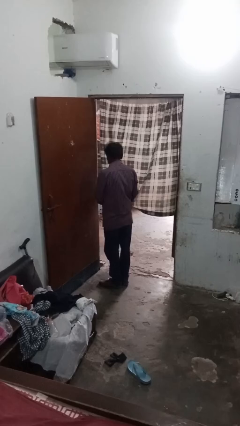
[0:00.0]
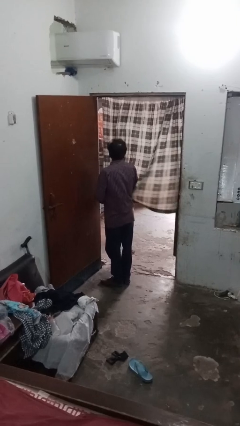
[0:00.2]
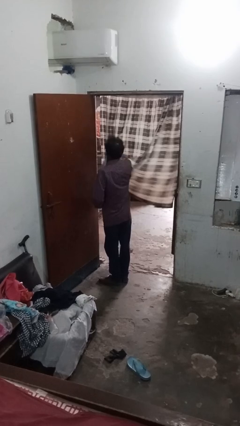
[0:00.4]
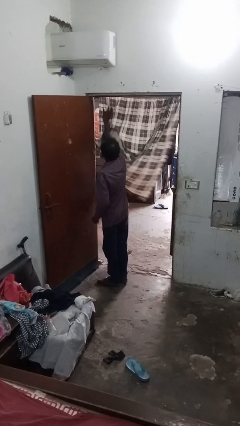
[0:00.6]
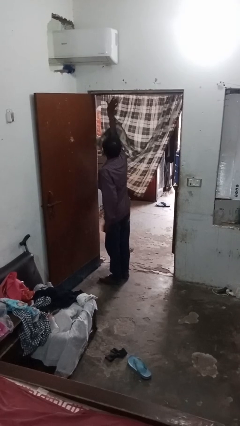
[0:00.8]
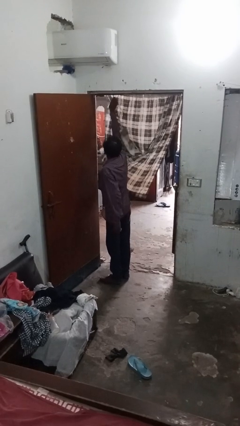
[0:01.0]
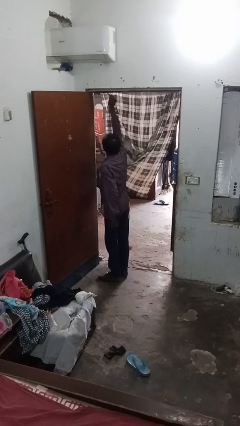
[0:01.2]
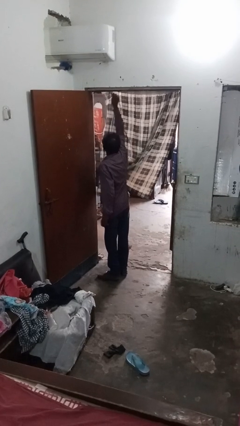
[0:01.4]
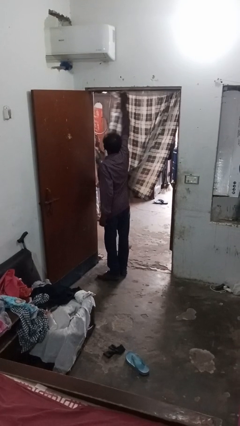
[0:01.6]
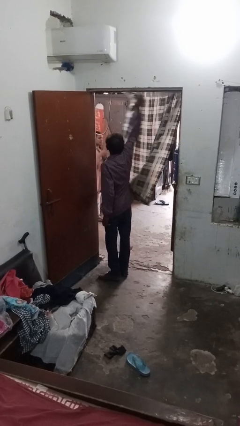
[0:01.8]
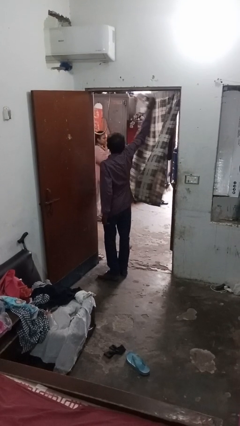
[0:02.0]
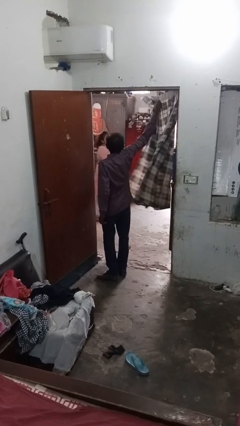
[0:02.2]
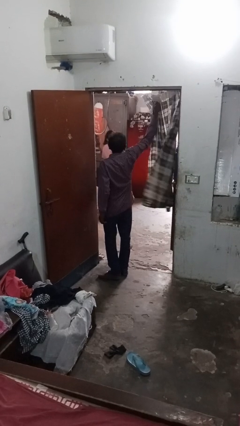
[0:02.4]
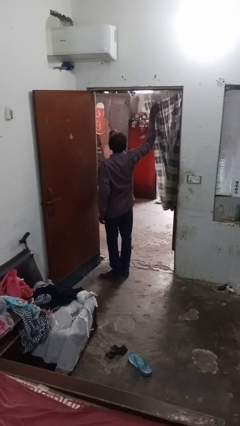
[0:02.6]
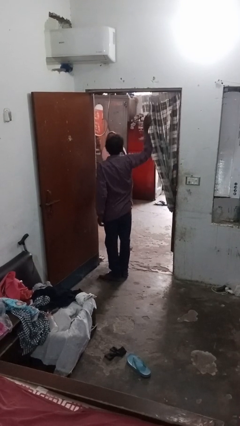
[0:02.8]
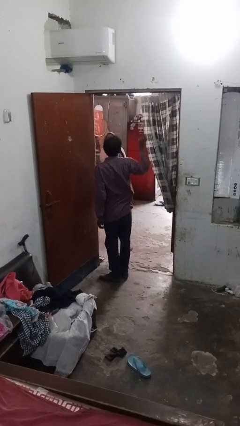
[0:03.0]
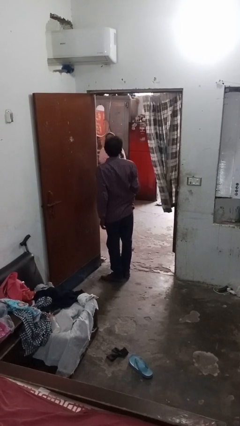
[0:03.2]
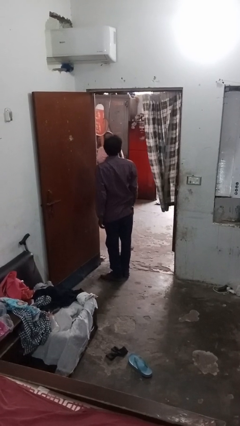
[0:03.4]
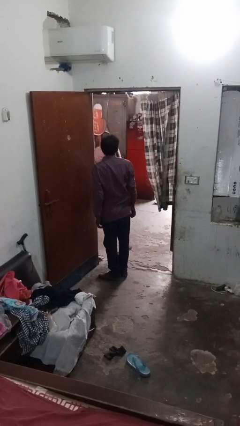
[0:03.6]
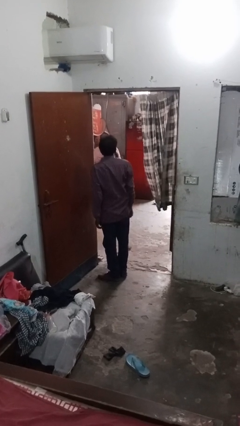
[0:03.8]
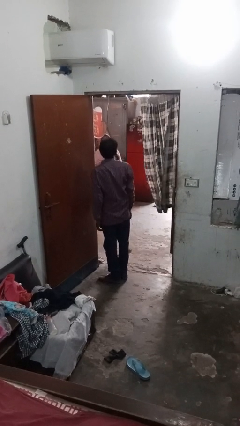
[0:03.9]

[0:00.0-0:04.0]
person opens curtains

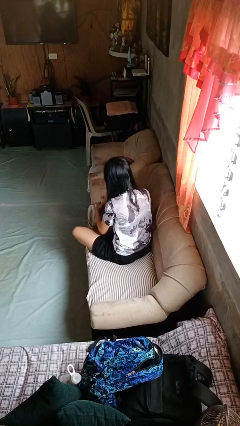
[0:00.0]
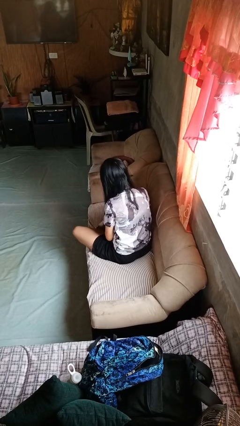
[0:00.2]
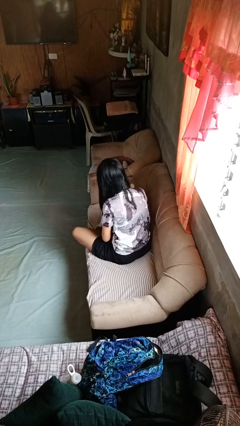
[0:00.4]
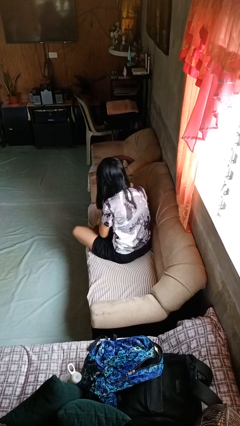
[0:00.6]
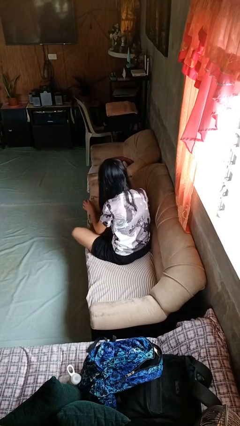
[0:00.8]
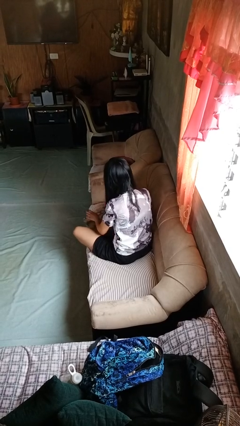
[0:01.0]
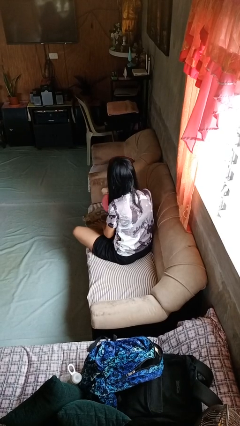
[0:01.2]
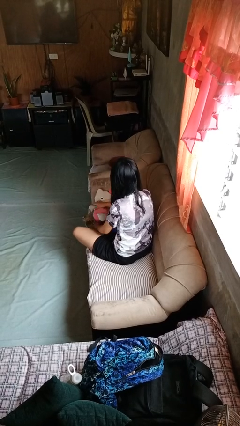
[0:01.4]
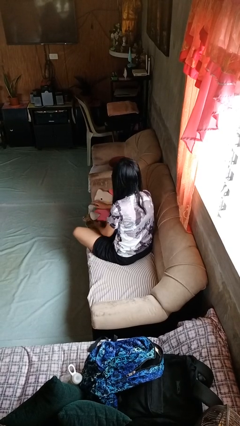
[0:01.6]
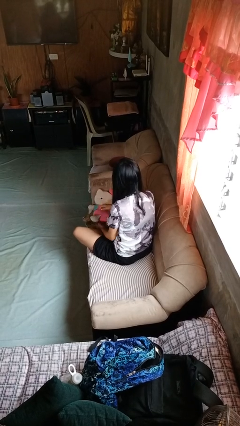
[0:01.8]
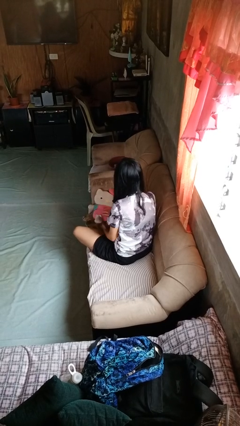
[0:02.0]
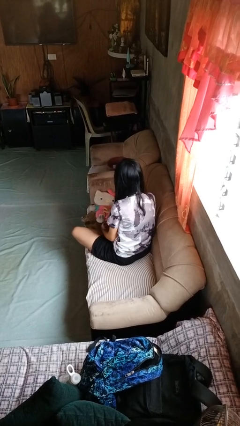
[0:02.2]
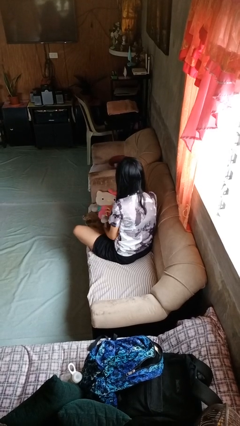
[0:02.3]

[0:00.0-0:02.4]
person searches in couch

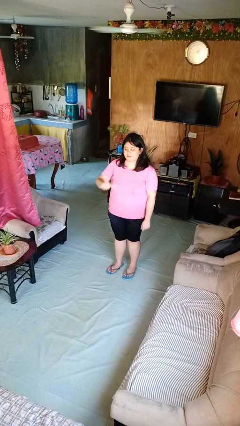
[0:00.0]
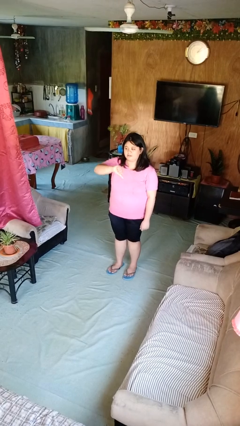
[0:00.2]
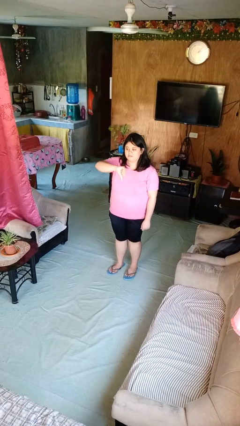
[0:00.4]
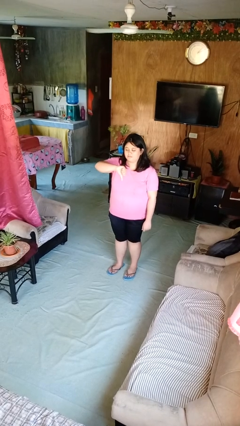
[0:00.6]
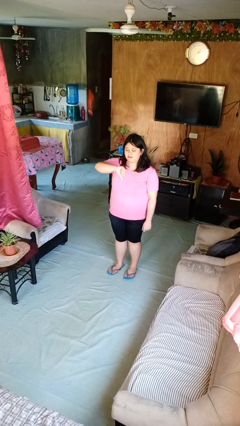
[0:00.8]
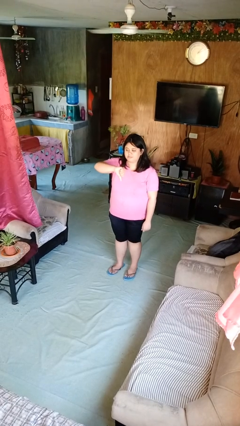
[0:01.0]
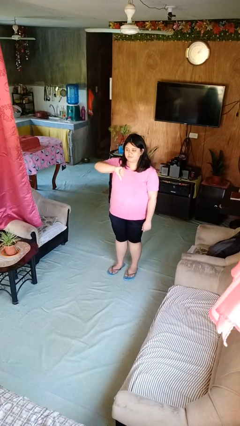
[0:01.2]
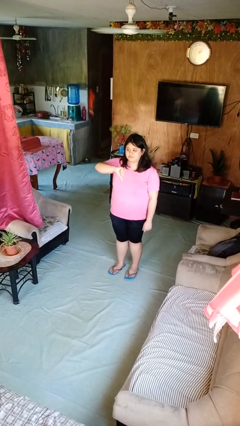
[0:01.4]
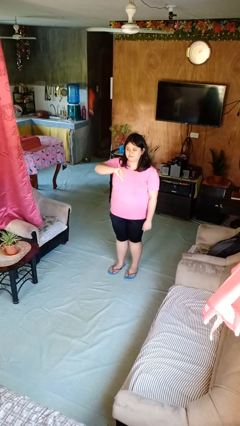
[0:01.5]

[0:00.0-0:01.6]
person gestures thumbs down

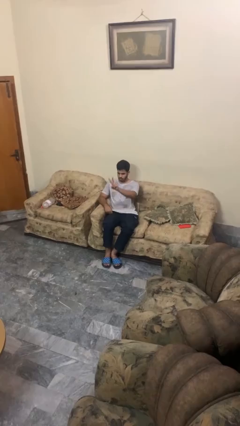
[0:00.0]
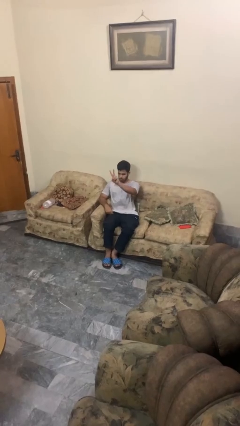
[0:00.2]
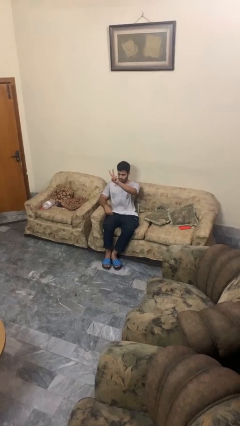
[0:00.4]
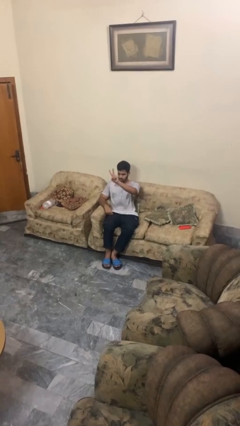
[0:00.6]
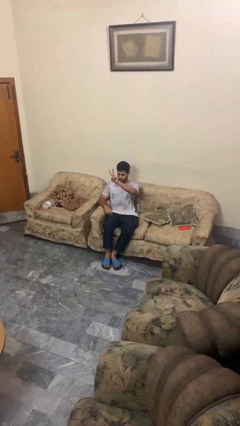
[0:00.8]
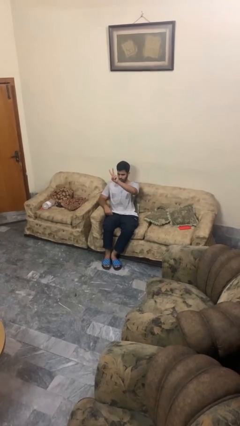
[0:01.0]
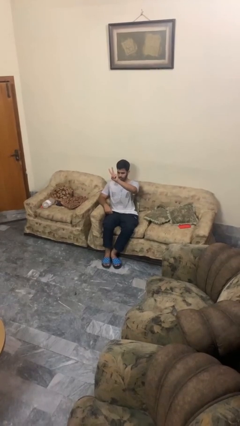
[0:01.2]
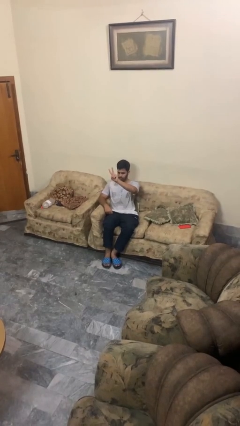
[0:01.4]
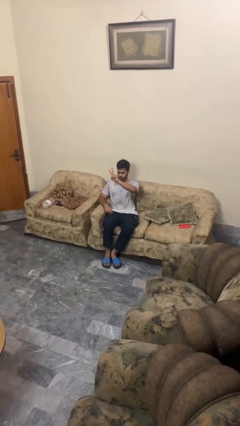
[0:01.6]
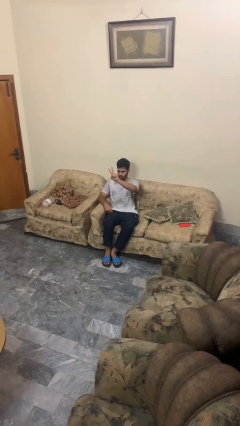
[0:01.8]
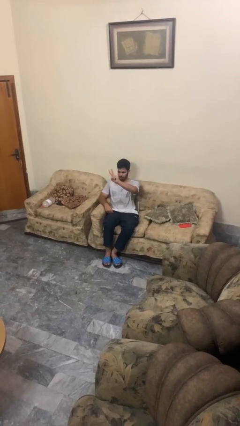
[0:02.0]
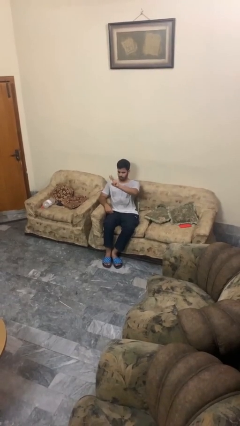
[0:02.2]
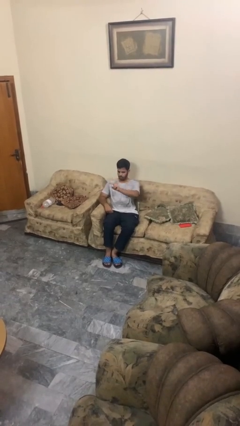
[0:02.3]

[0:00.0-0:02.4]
person gestures peace

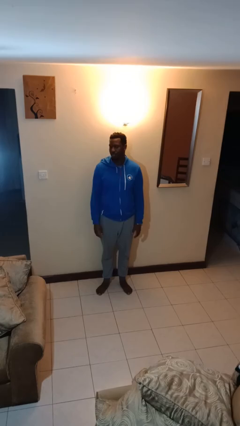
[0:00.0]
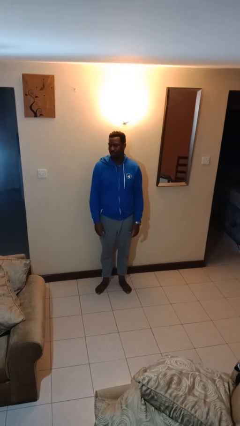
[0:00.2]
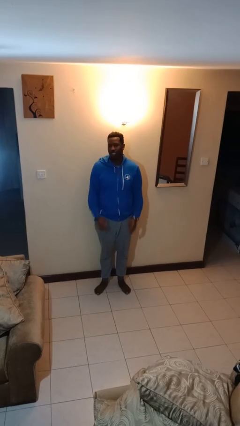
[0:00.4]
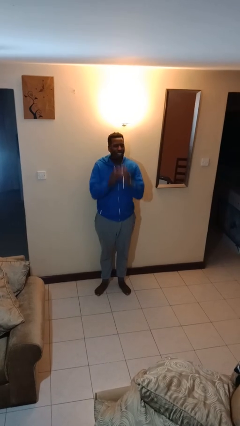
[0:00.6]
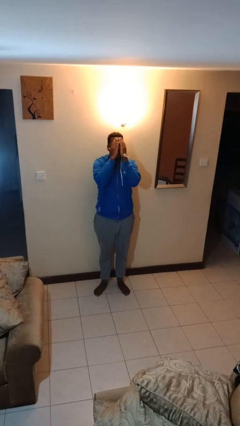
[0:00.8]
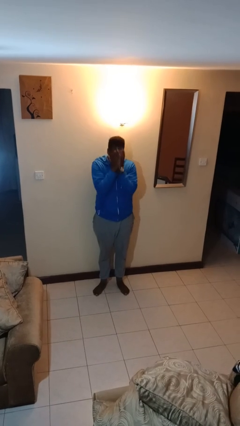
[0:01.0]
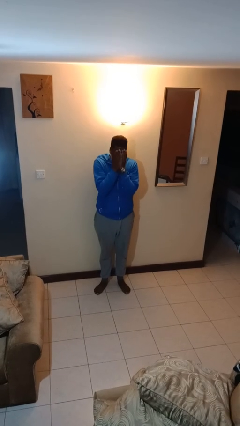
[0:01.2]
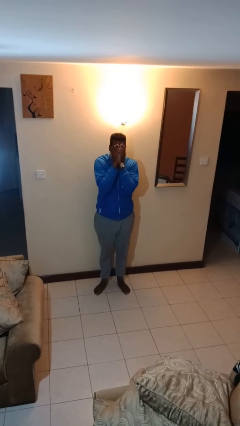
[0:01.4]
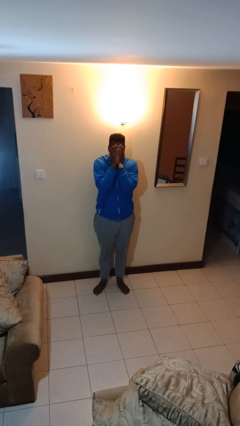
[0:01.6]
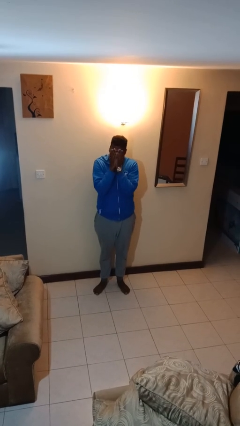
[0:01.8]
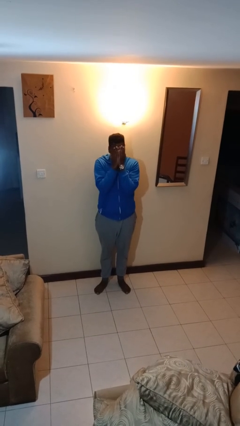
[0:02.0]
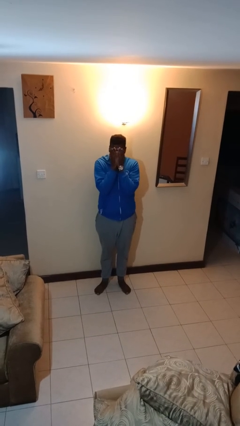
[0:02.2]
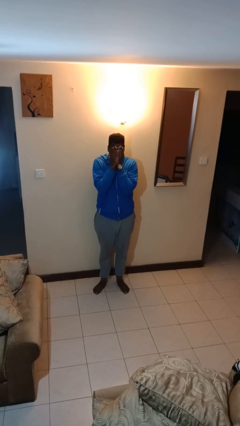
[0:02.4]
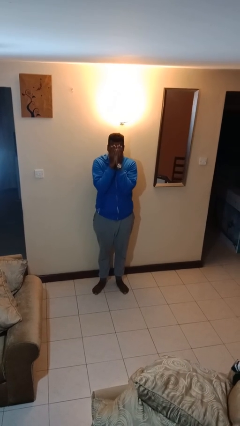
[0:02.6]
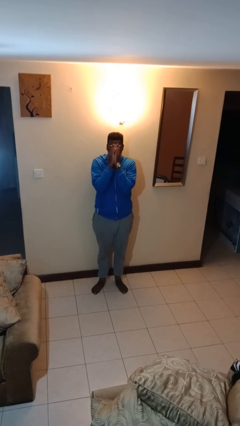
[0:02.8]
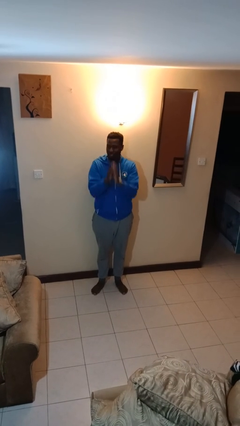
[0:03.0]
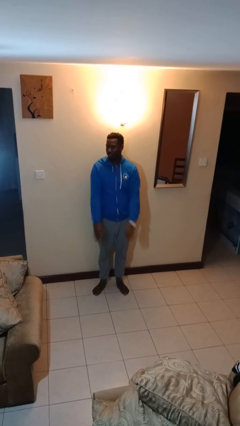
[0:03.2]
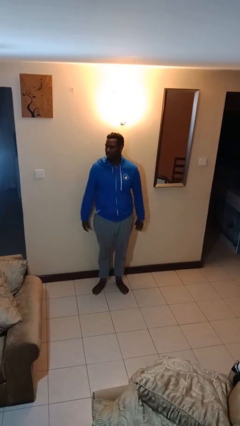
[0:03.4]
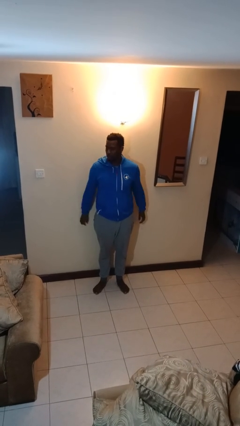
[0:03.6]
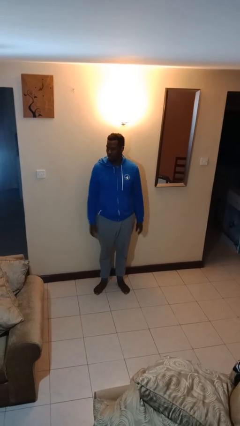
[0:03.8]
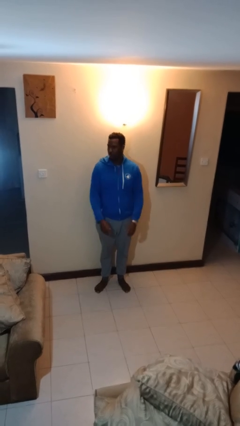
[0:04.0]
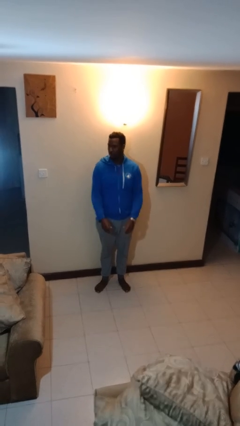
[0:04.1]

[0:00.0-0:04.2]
person covers face with hands

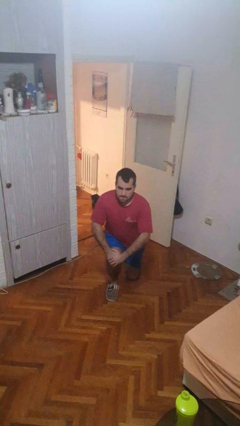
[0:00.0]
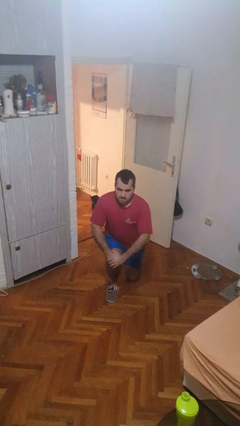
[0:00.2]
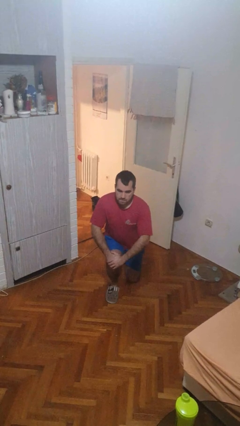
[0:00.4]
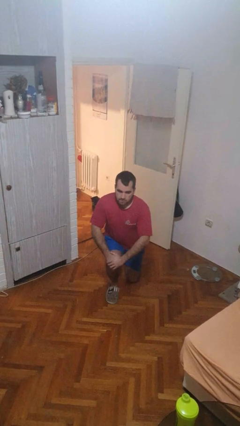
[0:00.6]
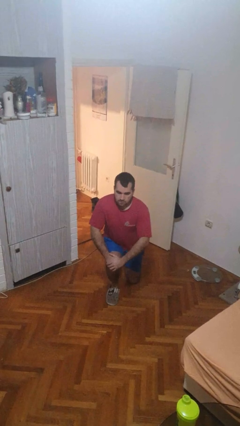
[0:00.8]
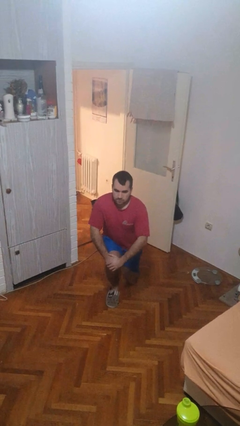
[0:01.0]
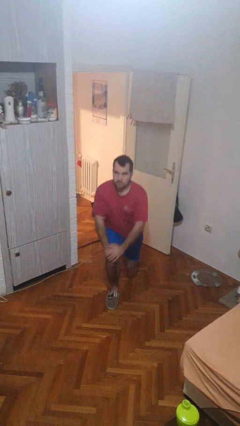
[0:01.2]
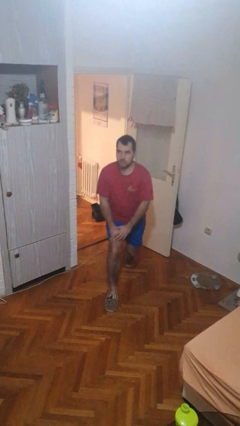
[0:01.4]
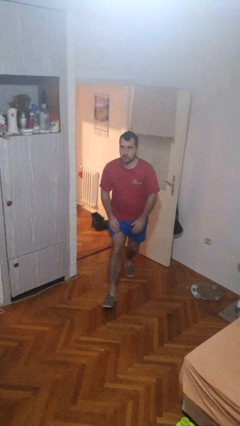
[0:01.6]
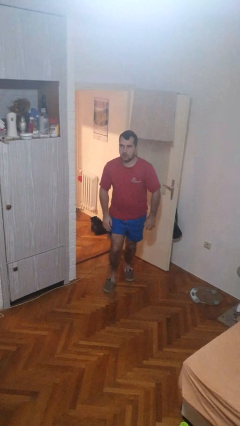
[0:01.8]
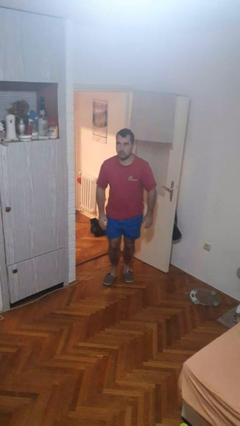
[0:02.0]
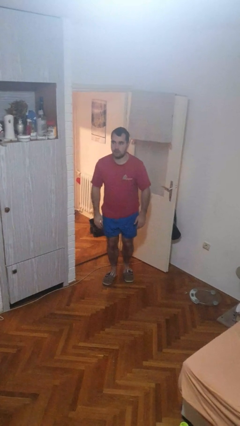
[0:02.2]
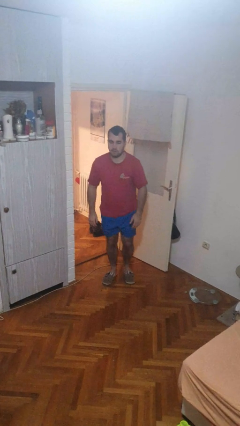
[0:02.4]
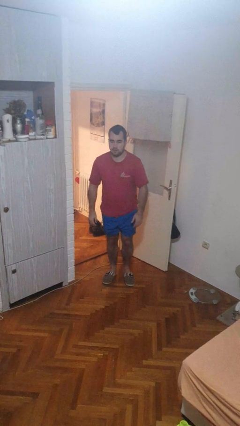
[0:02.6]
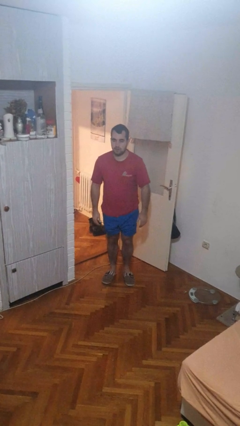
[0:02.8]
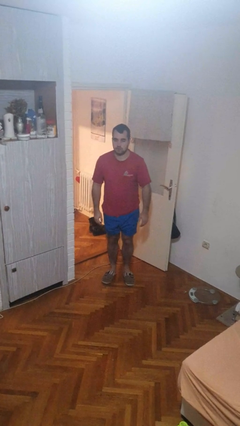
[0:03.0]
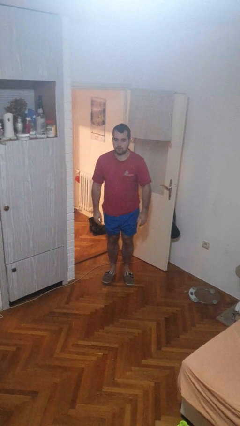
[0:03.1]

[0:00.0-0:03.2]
person stands up from floor
